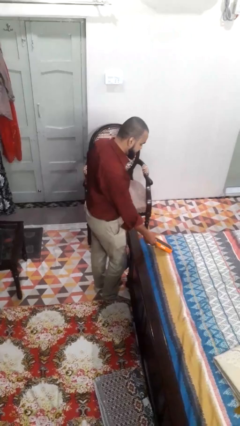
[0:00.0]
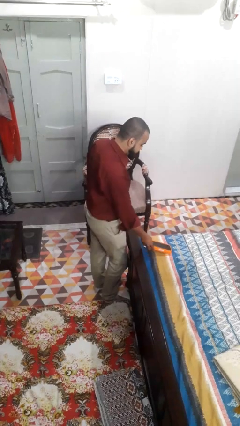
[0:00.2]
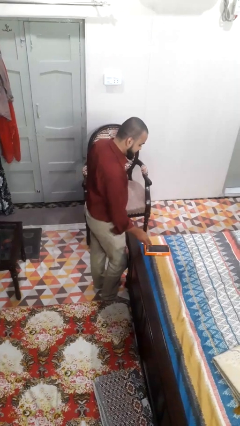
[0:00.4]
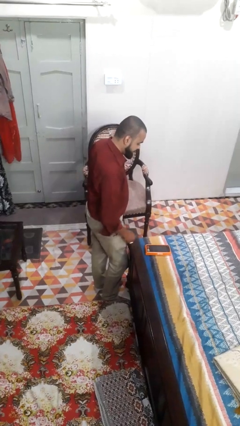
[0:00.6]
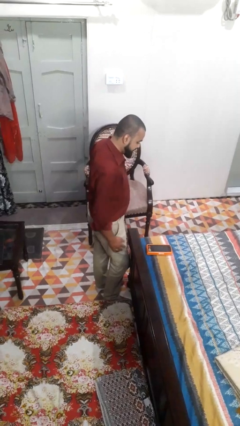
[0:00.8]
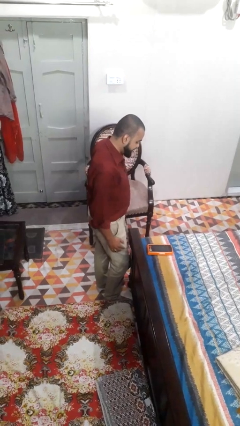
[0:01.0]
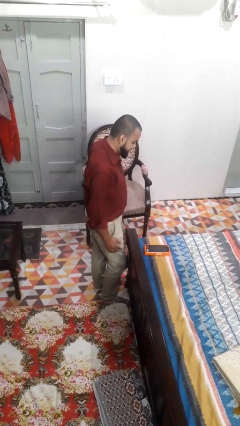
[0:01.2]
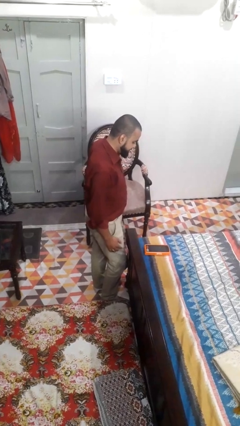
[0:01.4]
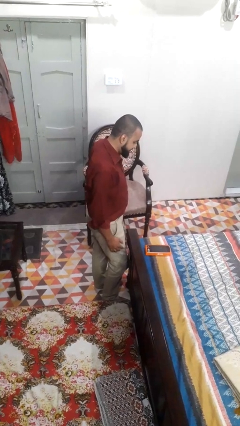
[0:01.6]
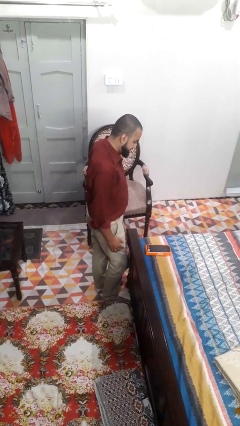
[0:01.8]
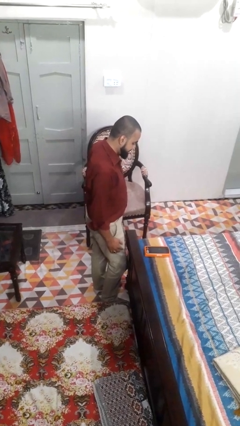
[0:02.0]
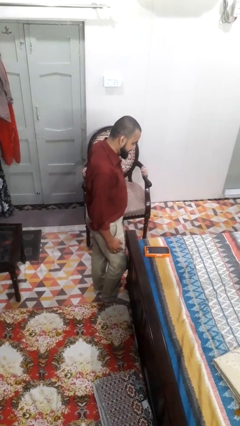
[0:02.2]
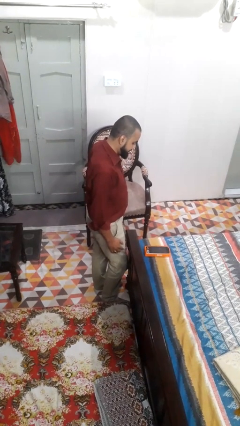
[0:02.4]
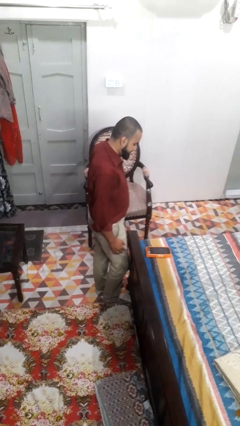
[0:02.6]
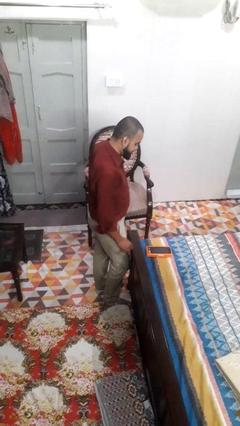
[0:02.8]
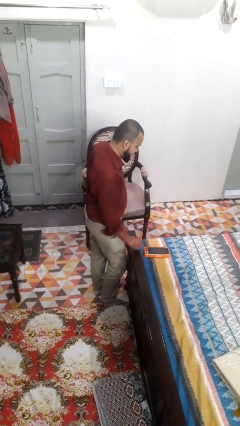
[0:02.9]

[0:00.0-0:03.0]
person puts down object on bed

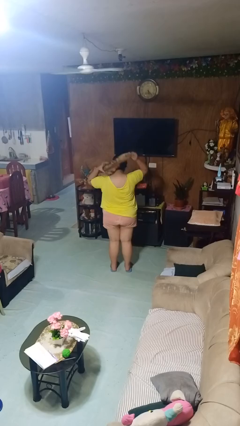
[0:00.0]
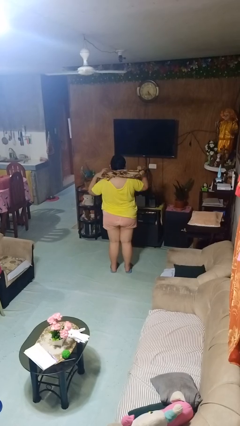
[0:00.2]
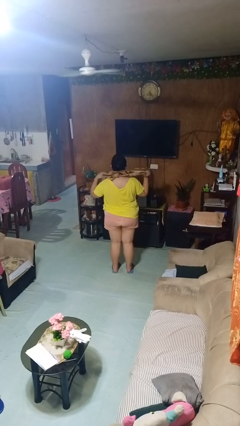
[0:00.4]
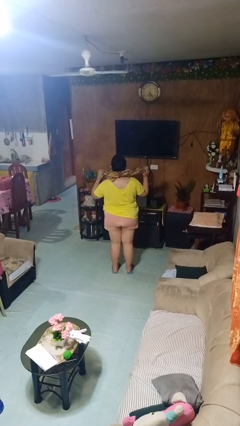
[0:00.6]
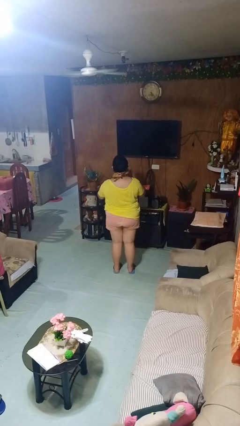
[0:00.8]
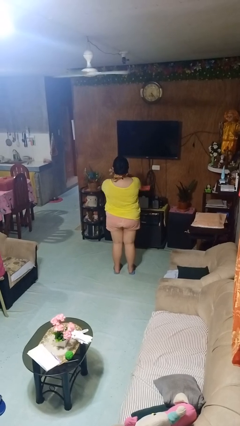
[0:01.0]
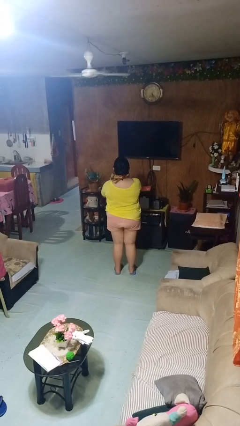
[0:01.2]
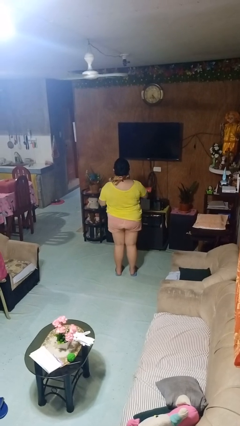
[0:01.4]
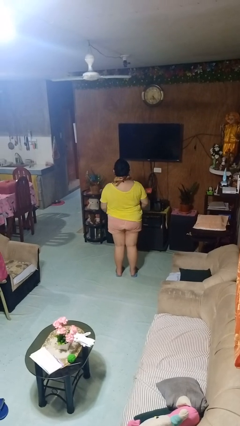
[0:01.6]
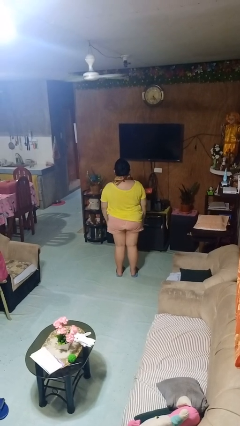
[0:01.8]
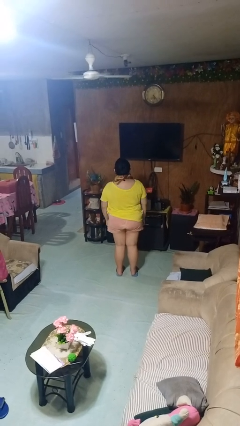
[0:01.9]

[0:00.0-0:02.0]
person puts on scarf

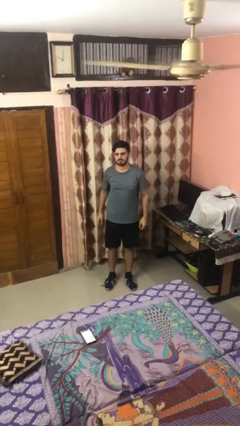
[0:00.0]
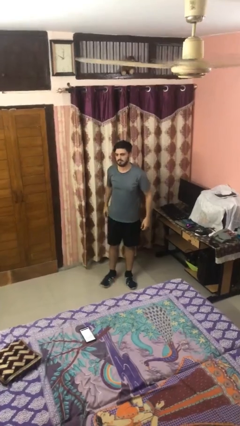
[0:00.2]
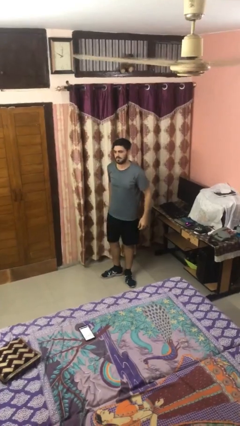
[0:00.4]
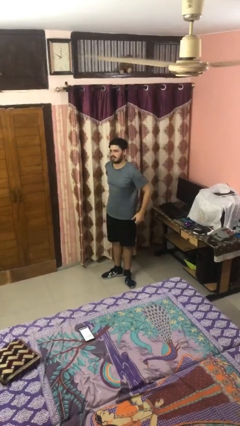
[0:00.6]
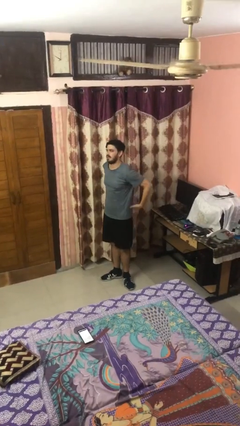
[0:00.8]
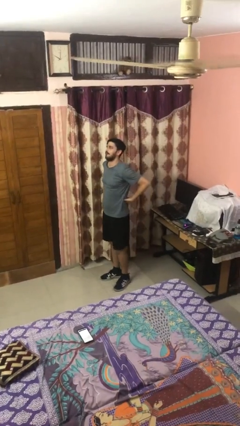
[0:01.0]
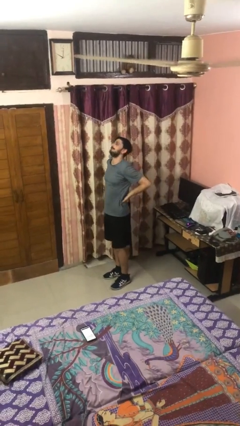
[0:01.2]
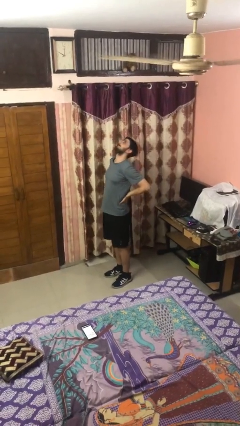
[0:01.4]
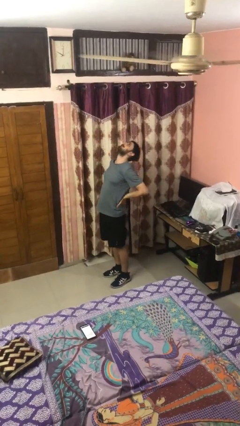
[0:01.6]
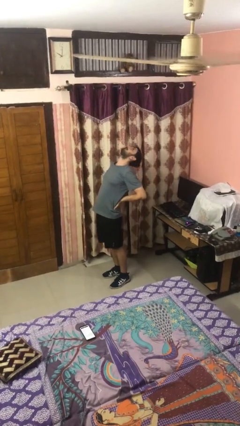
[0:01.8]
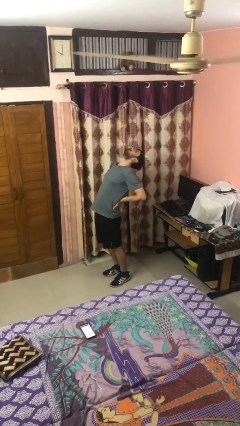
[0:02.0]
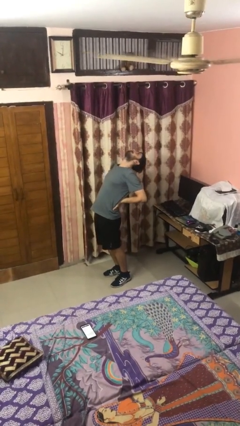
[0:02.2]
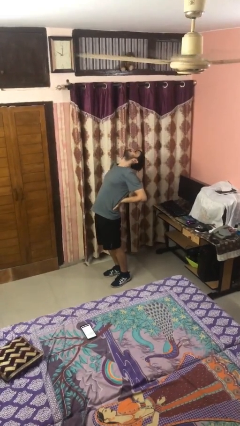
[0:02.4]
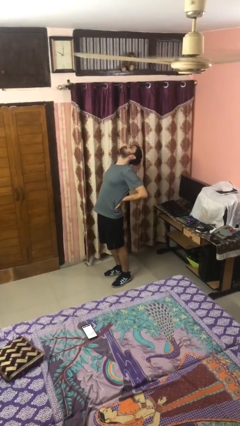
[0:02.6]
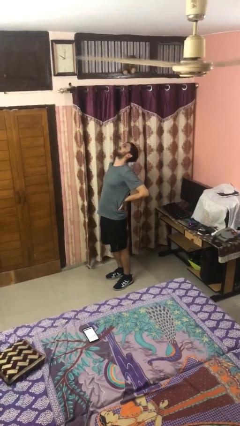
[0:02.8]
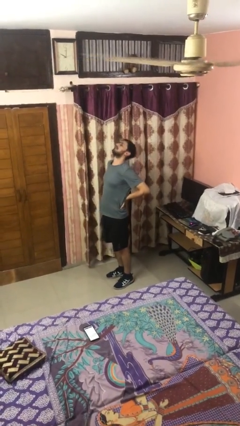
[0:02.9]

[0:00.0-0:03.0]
person stretches back

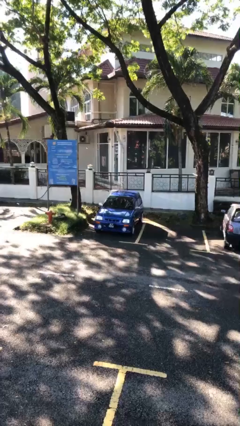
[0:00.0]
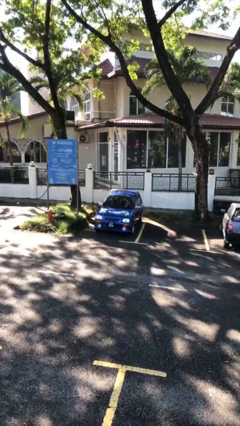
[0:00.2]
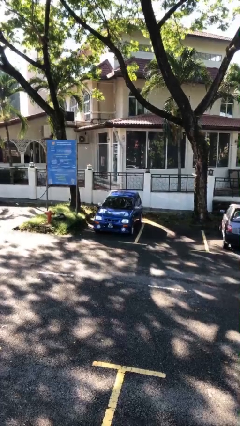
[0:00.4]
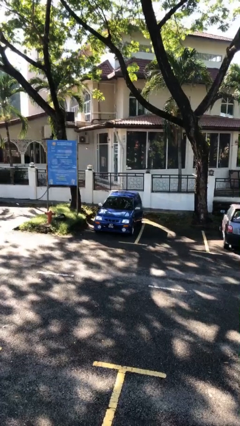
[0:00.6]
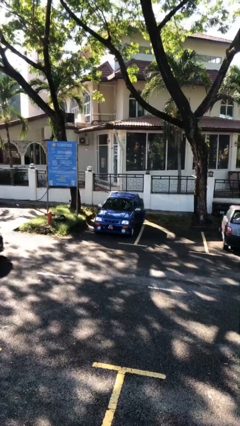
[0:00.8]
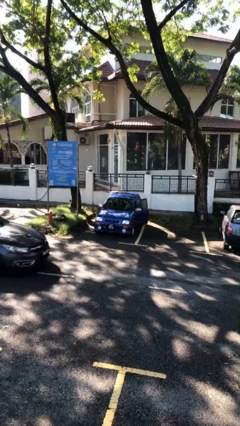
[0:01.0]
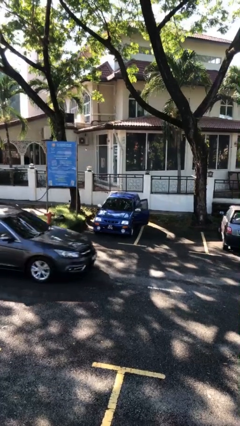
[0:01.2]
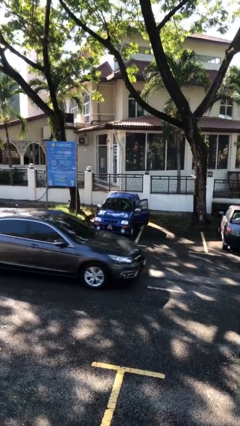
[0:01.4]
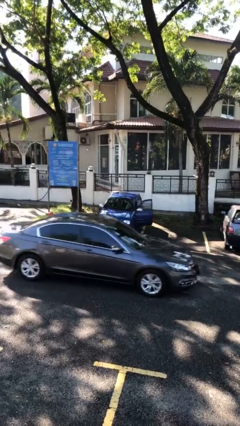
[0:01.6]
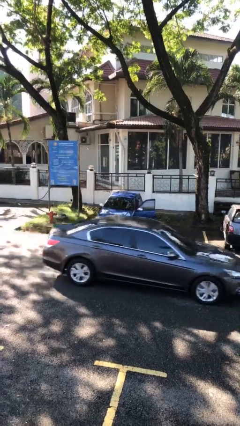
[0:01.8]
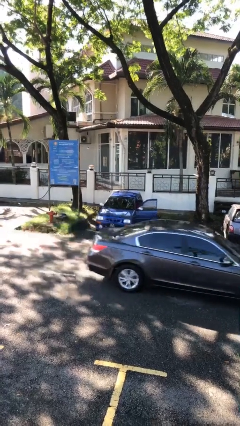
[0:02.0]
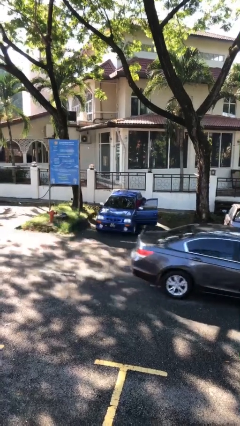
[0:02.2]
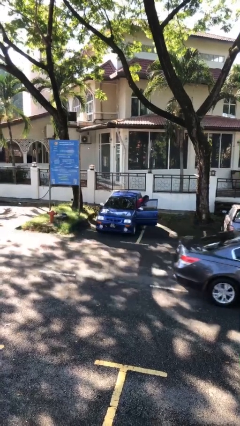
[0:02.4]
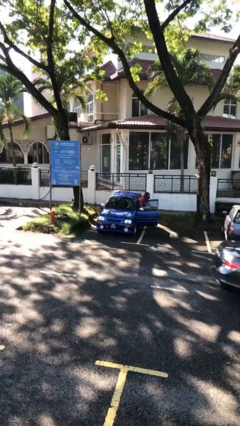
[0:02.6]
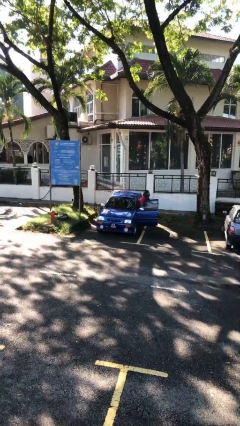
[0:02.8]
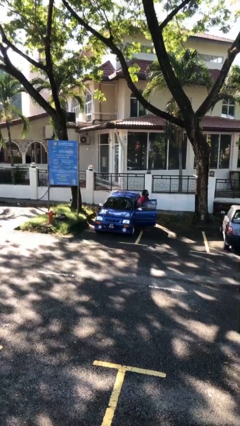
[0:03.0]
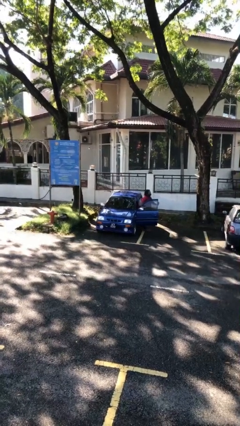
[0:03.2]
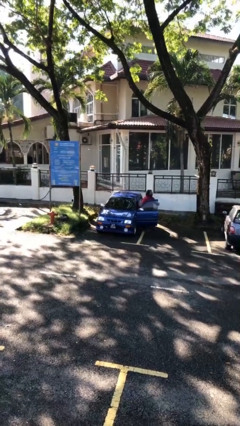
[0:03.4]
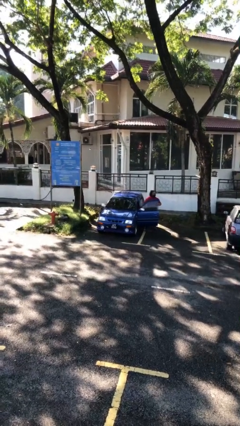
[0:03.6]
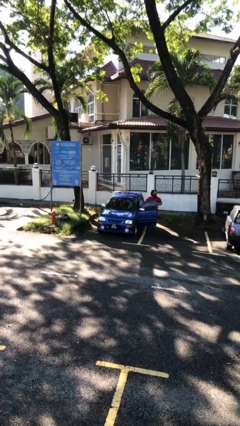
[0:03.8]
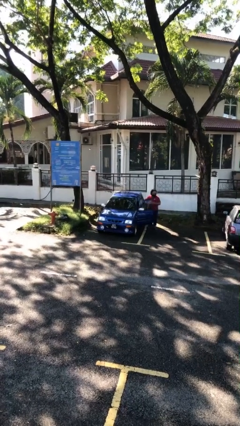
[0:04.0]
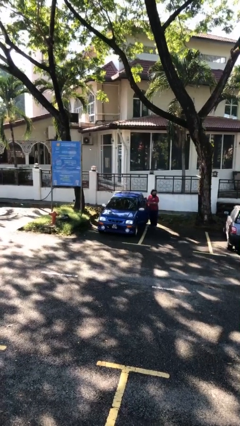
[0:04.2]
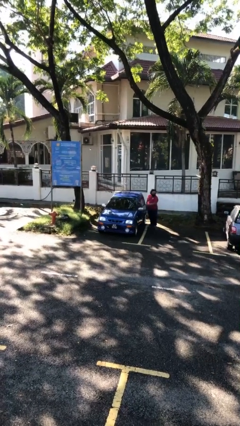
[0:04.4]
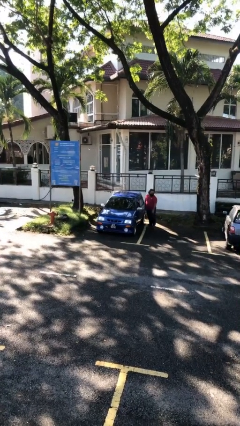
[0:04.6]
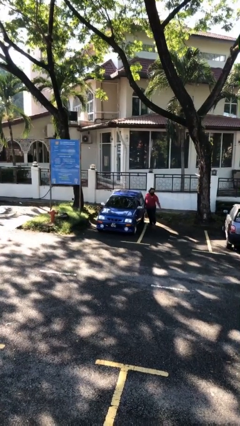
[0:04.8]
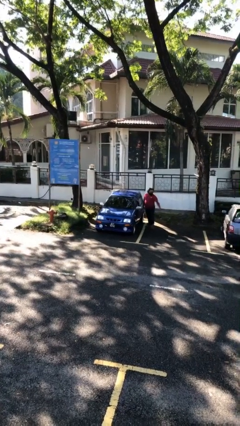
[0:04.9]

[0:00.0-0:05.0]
car drops off person

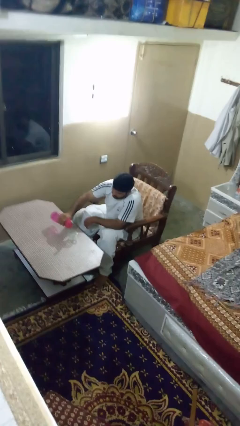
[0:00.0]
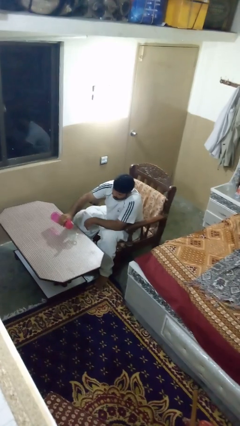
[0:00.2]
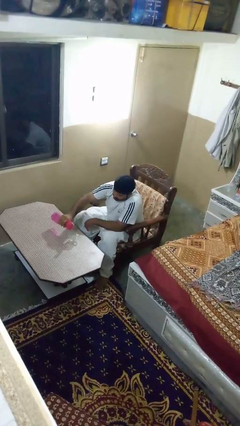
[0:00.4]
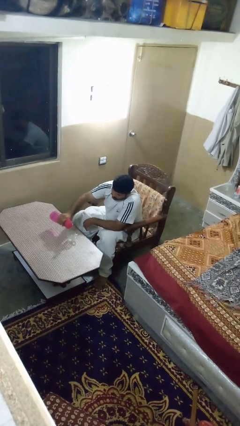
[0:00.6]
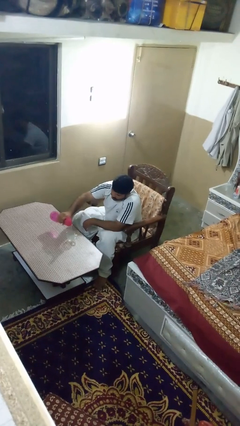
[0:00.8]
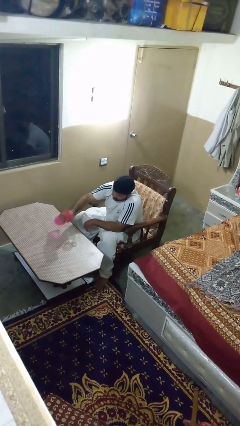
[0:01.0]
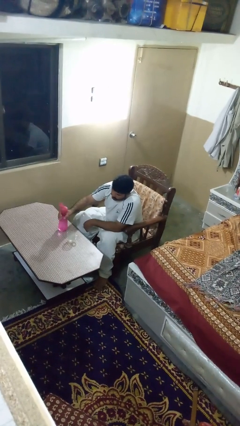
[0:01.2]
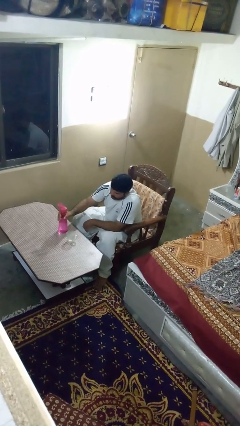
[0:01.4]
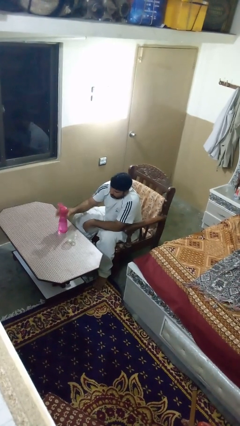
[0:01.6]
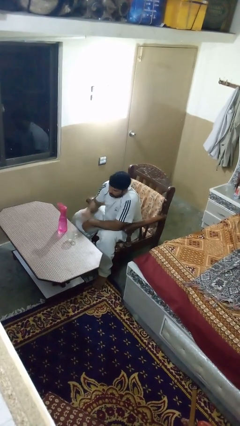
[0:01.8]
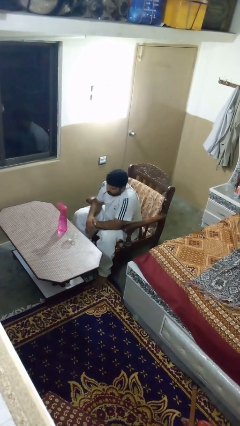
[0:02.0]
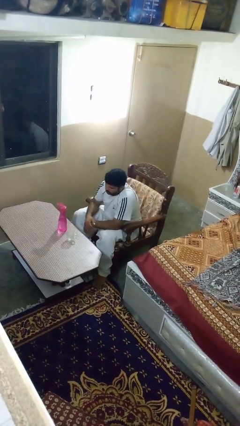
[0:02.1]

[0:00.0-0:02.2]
person pours liquid into cup

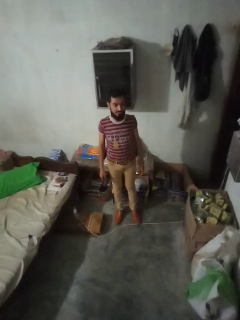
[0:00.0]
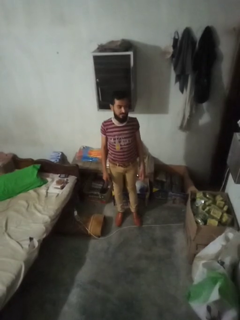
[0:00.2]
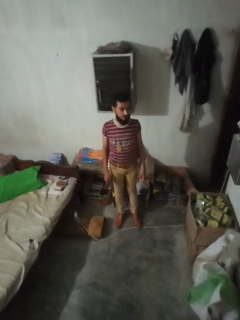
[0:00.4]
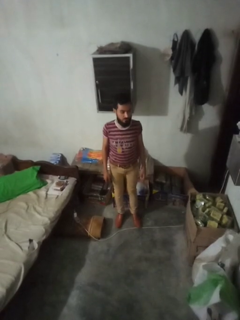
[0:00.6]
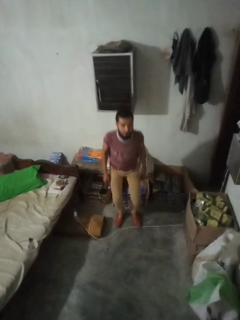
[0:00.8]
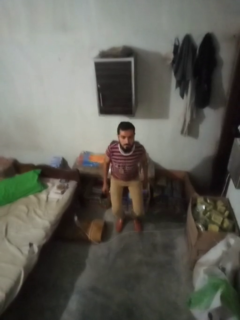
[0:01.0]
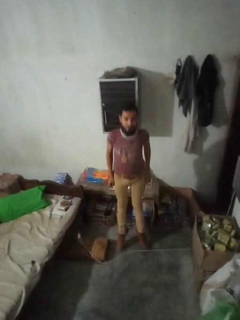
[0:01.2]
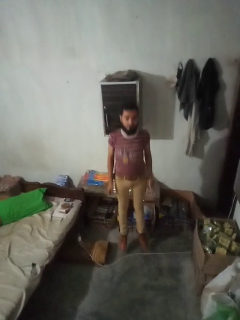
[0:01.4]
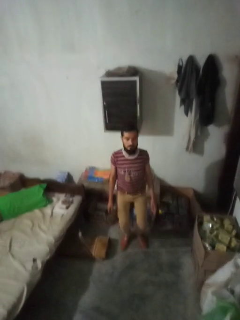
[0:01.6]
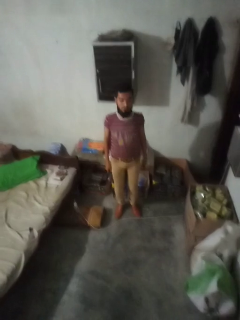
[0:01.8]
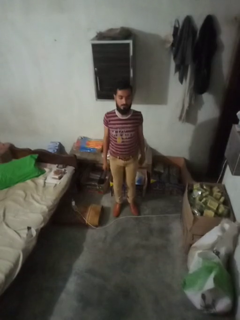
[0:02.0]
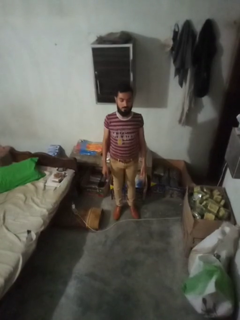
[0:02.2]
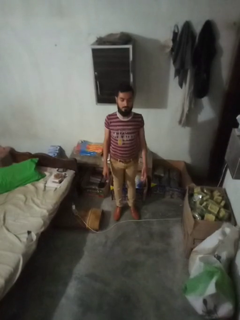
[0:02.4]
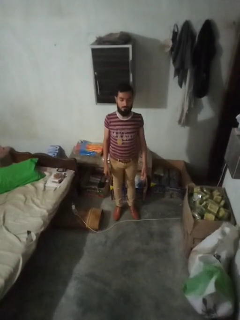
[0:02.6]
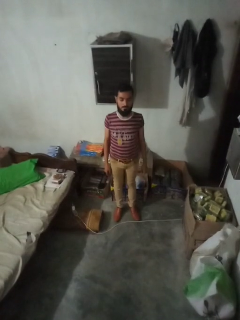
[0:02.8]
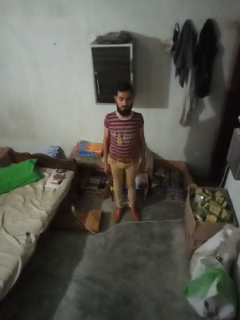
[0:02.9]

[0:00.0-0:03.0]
person jumps

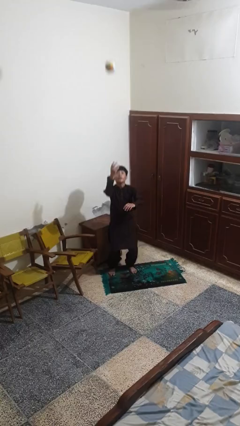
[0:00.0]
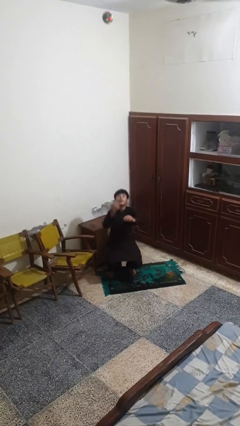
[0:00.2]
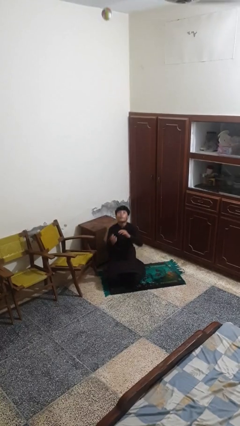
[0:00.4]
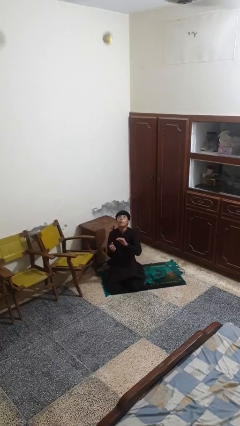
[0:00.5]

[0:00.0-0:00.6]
person drops object
